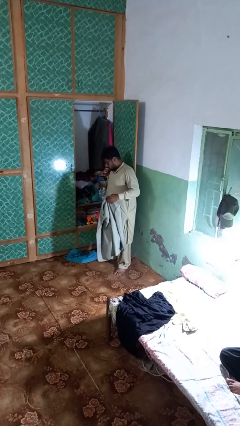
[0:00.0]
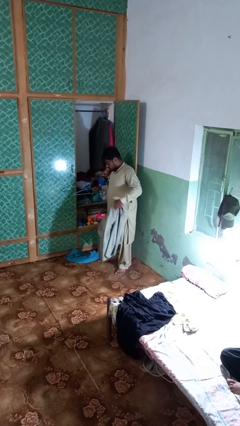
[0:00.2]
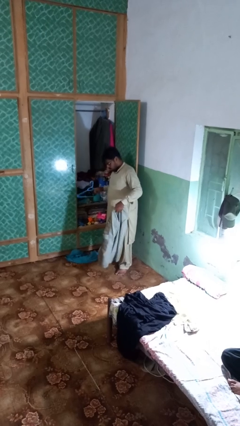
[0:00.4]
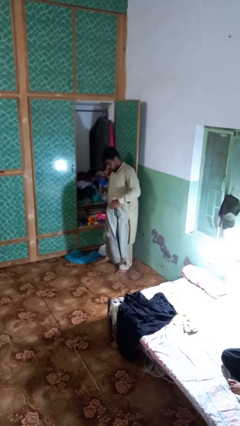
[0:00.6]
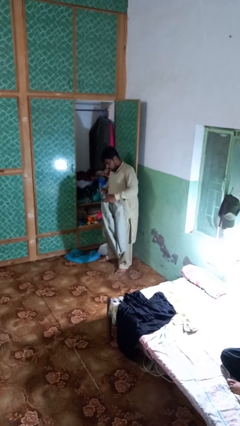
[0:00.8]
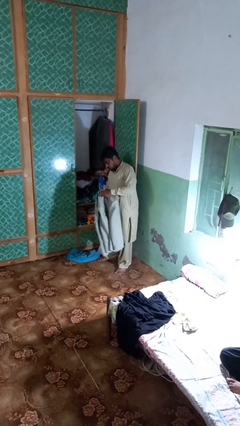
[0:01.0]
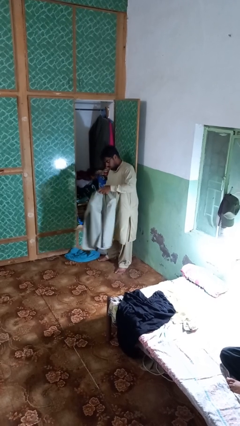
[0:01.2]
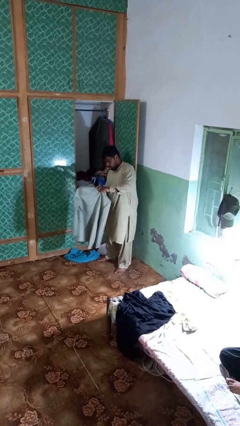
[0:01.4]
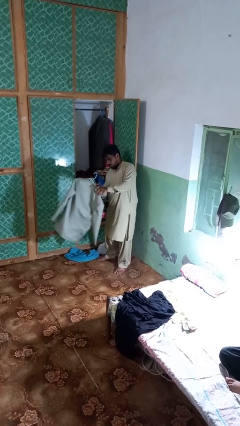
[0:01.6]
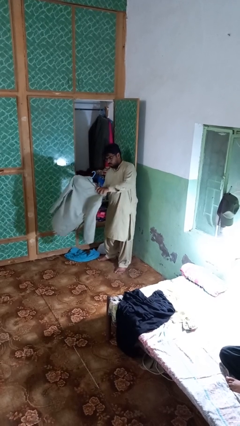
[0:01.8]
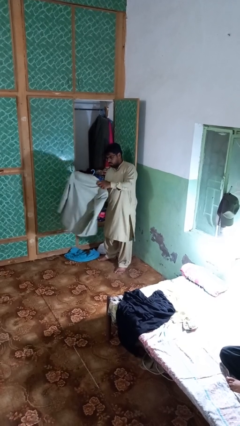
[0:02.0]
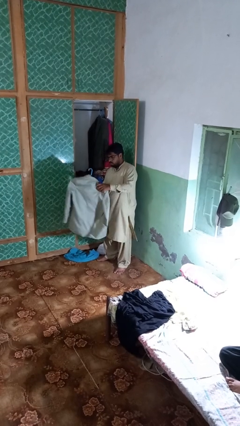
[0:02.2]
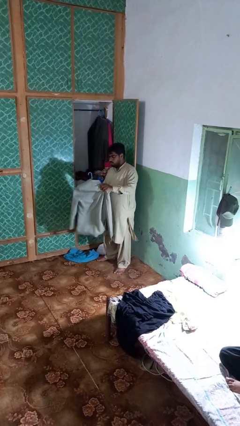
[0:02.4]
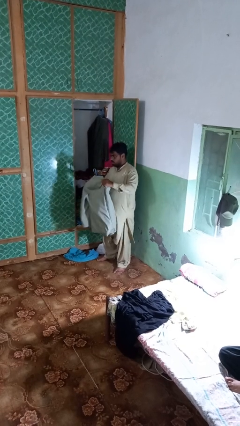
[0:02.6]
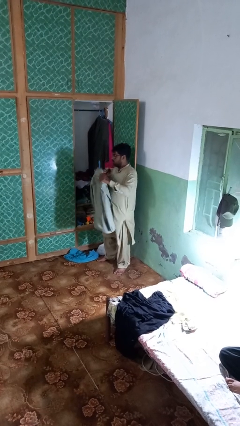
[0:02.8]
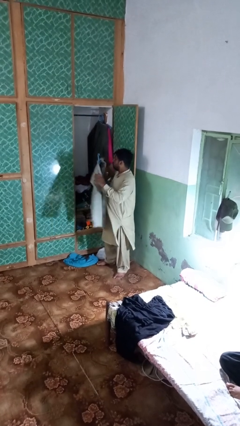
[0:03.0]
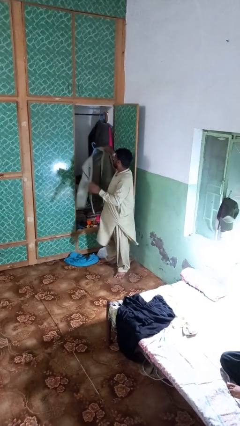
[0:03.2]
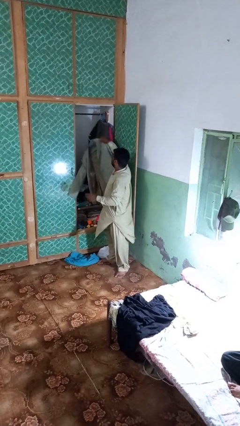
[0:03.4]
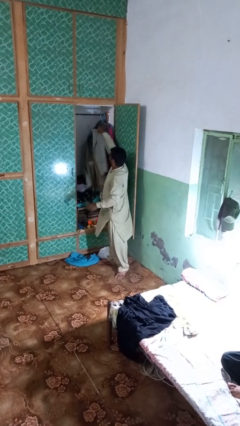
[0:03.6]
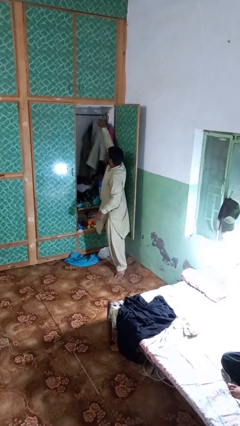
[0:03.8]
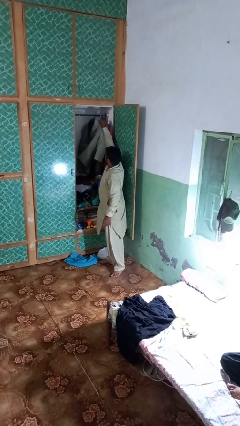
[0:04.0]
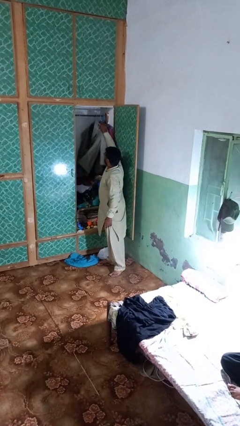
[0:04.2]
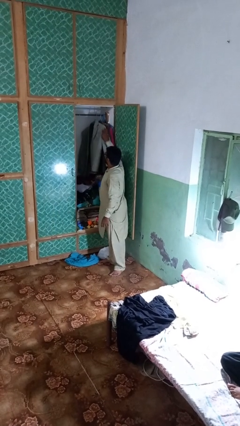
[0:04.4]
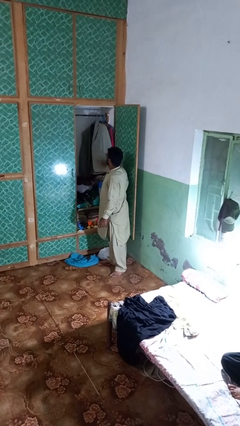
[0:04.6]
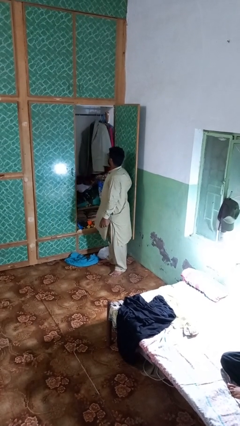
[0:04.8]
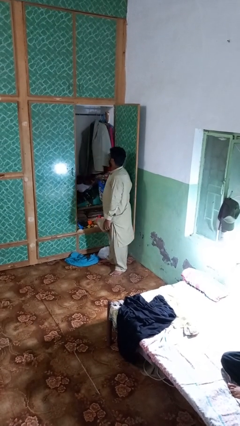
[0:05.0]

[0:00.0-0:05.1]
person puts clothes into closet

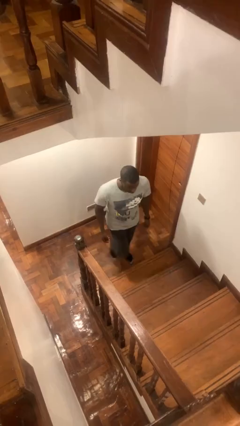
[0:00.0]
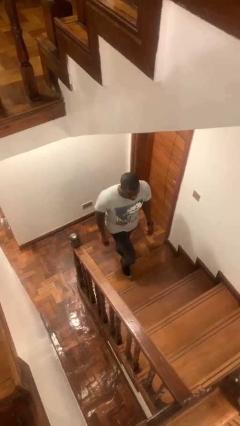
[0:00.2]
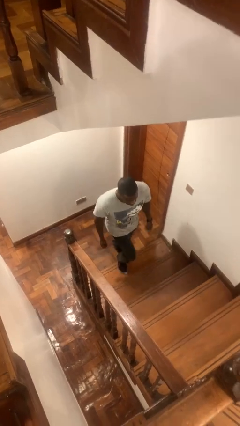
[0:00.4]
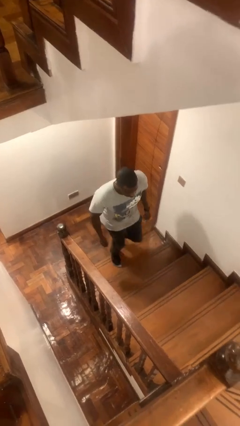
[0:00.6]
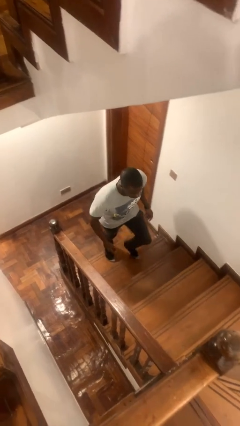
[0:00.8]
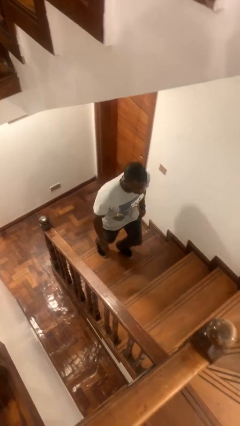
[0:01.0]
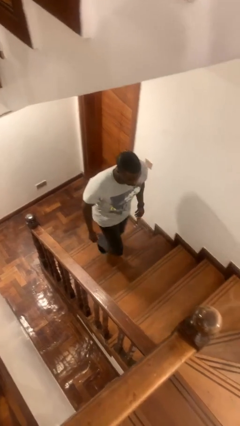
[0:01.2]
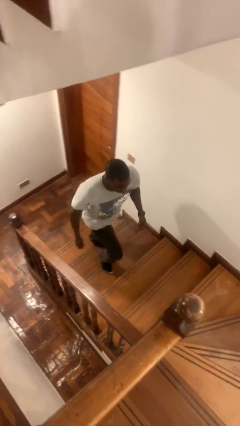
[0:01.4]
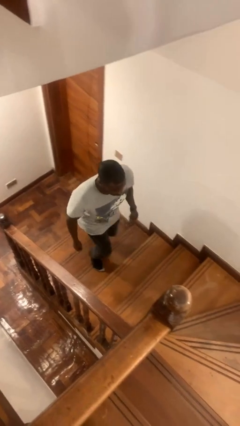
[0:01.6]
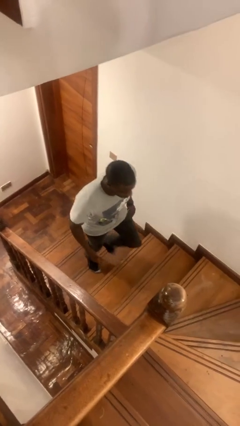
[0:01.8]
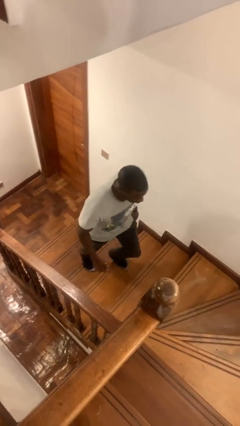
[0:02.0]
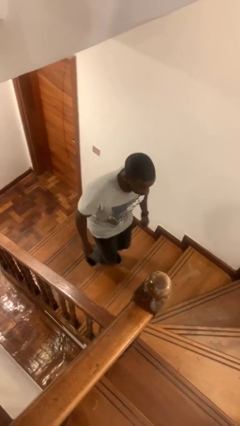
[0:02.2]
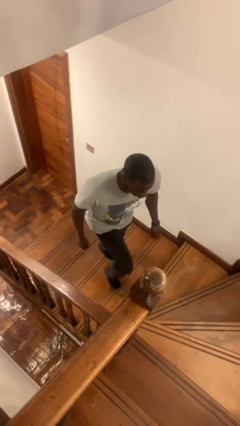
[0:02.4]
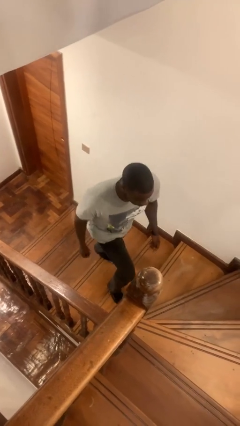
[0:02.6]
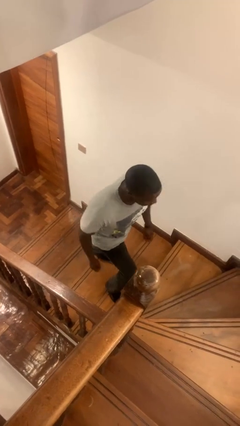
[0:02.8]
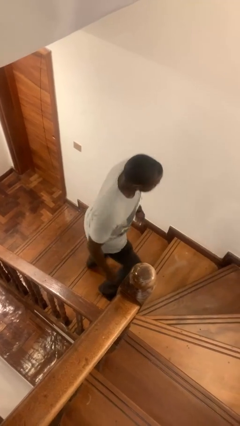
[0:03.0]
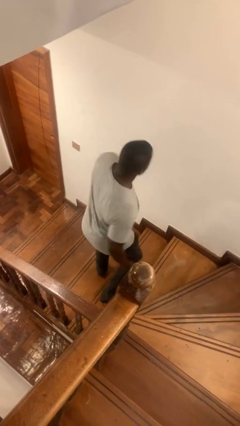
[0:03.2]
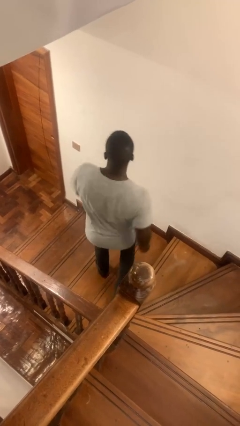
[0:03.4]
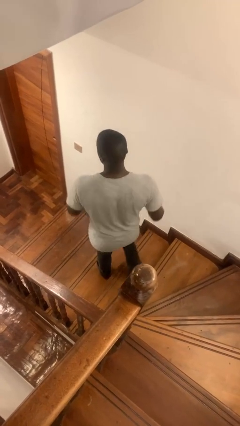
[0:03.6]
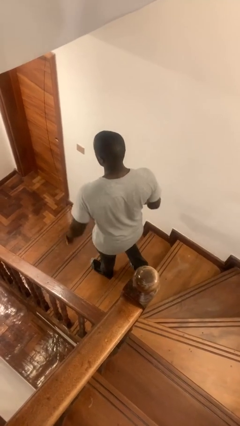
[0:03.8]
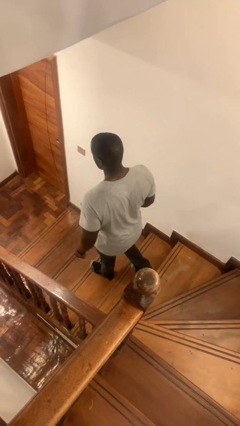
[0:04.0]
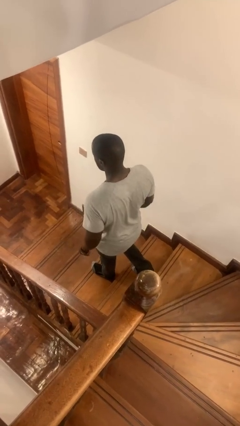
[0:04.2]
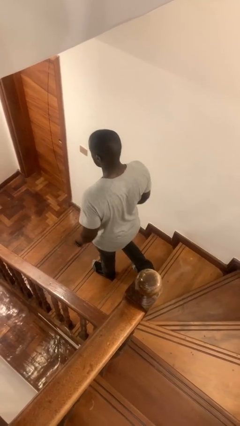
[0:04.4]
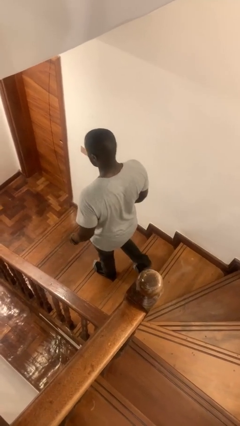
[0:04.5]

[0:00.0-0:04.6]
person climbs up stairs

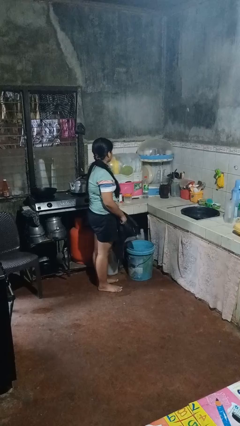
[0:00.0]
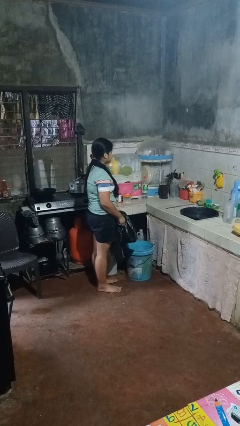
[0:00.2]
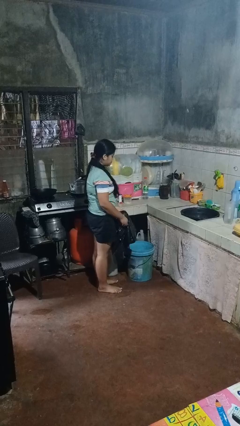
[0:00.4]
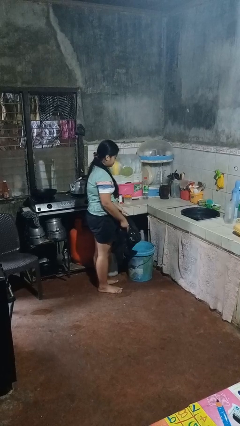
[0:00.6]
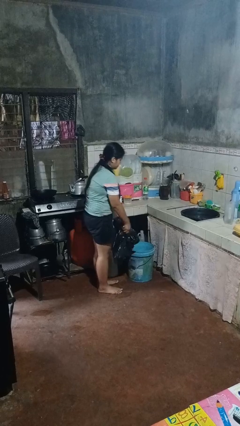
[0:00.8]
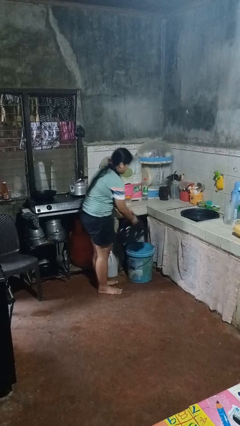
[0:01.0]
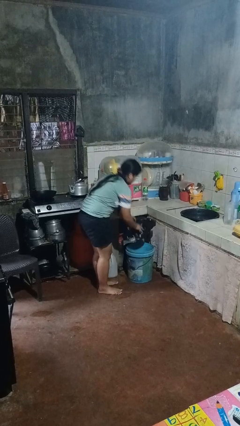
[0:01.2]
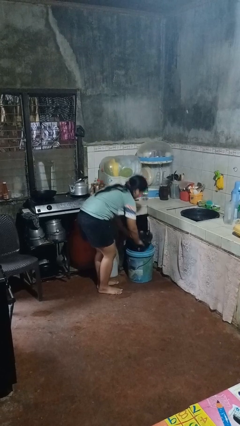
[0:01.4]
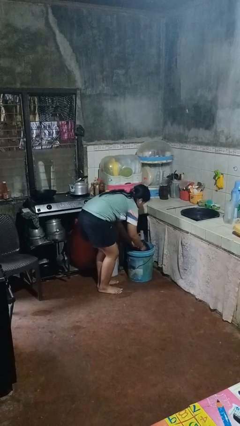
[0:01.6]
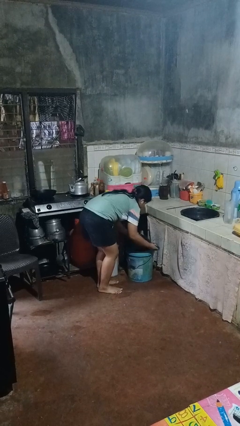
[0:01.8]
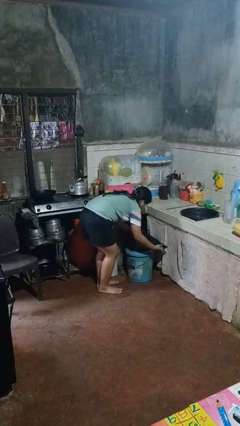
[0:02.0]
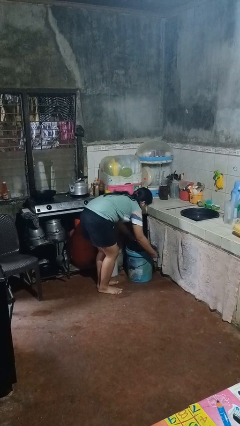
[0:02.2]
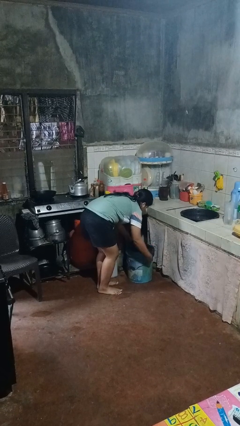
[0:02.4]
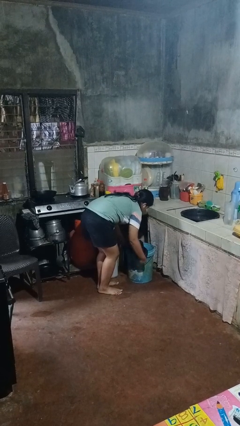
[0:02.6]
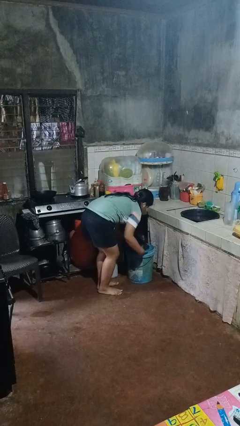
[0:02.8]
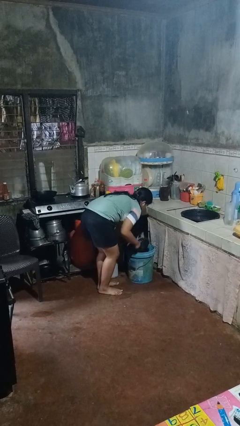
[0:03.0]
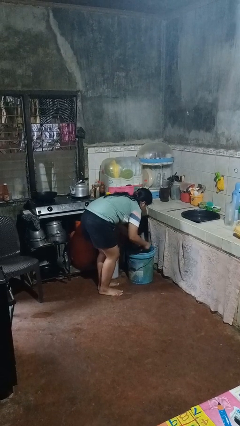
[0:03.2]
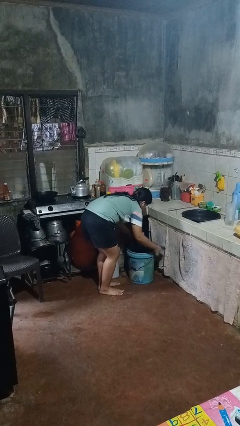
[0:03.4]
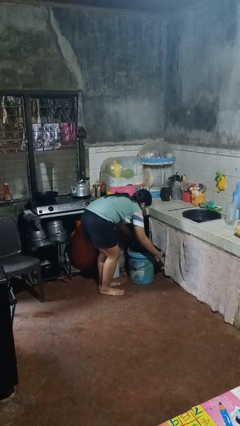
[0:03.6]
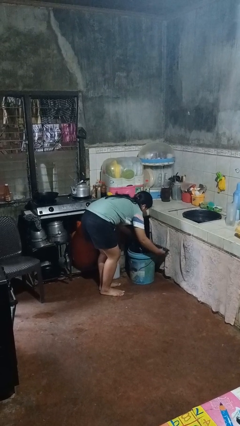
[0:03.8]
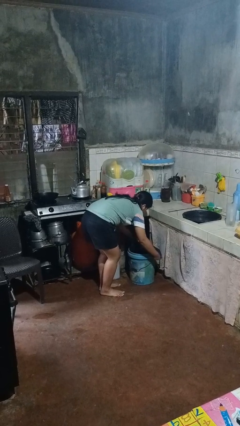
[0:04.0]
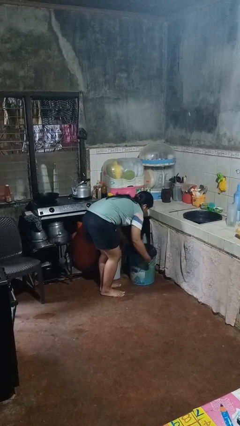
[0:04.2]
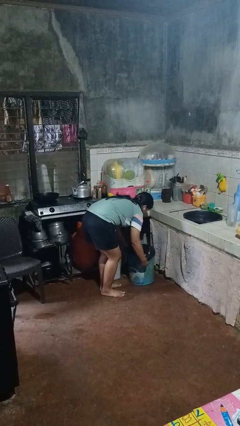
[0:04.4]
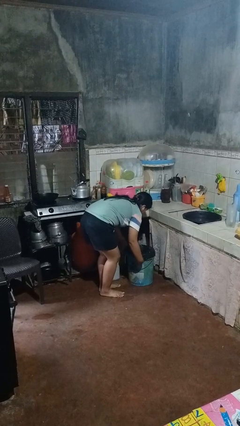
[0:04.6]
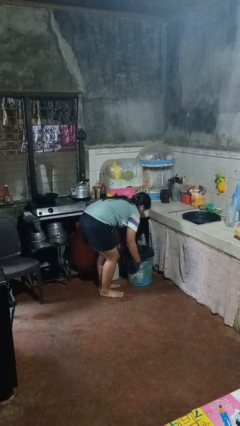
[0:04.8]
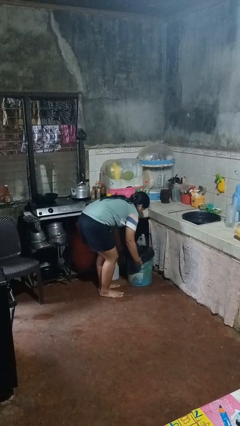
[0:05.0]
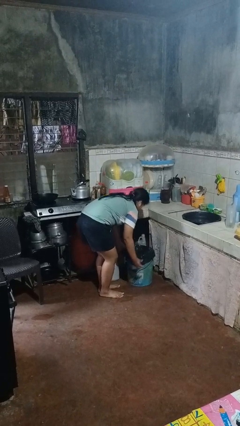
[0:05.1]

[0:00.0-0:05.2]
person inserts trashbag into trashcan

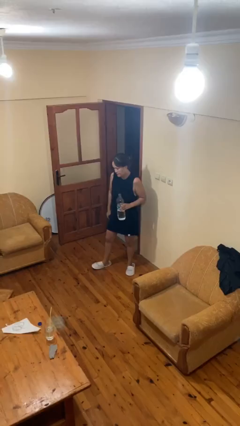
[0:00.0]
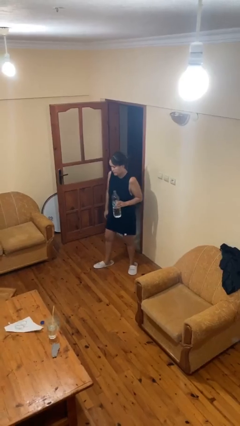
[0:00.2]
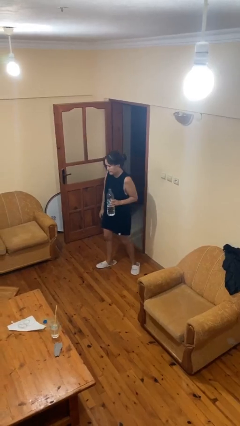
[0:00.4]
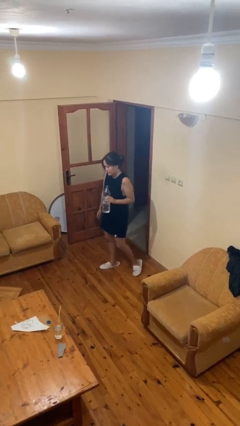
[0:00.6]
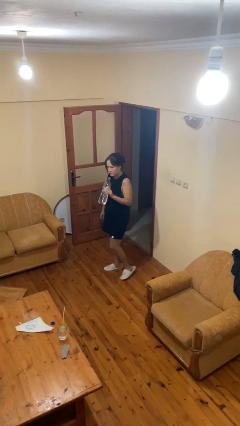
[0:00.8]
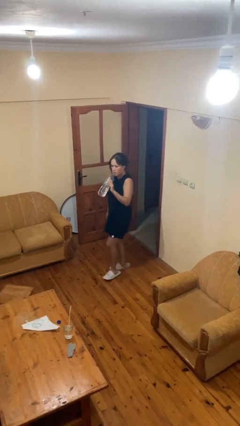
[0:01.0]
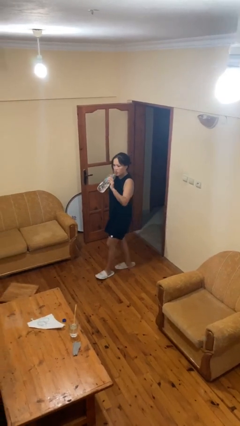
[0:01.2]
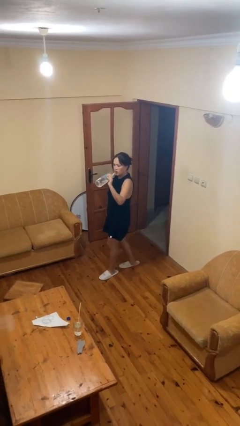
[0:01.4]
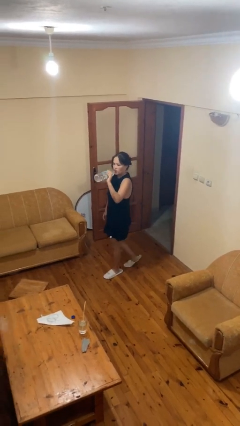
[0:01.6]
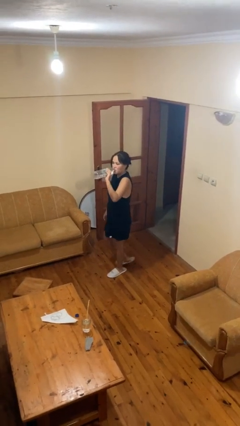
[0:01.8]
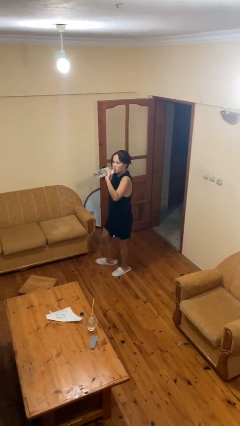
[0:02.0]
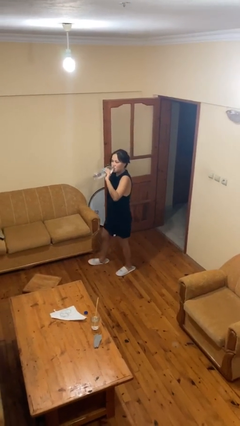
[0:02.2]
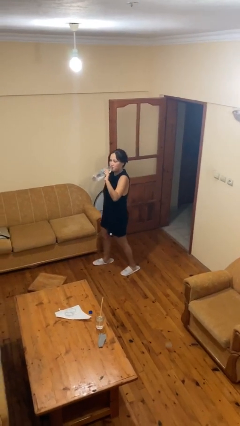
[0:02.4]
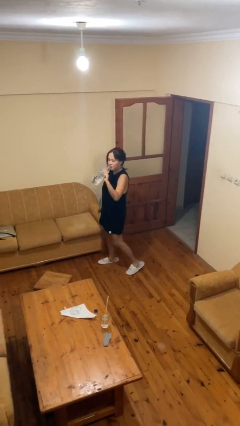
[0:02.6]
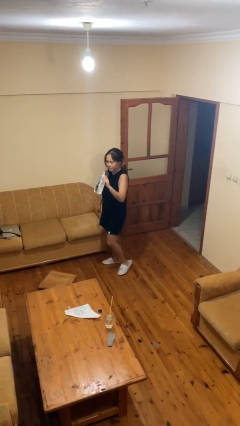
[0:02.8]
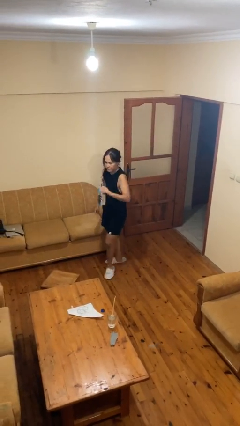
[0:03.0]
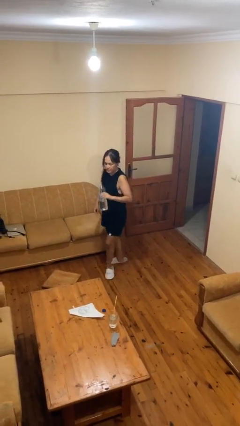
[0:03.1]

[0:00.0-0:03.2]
person drinks from bottle
